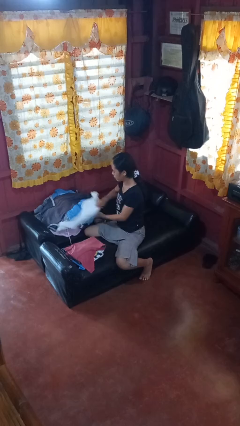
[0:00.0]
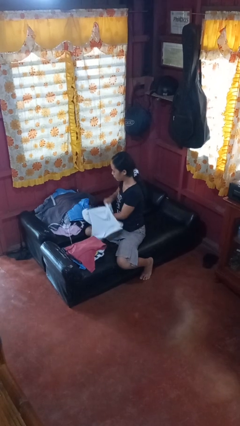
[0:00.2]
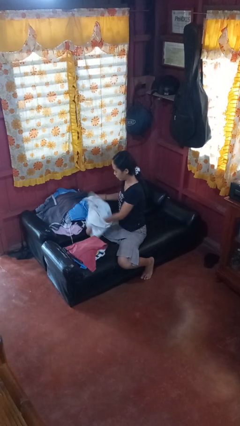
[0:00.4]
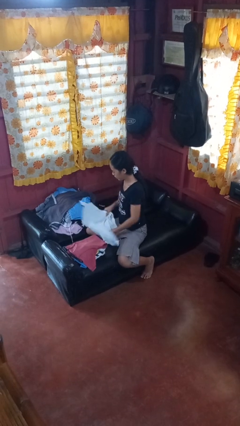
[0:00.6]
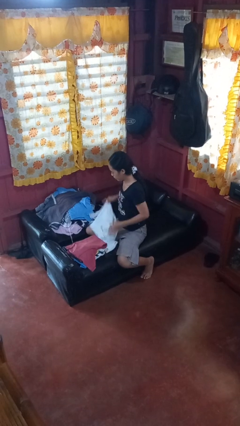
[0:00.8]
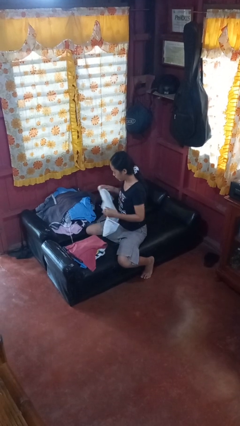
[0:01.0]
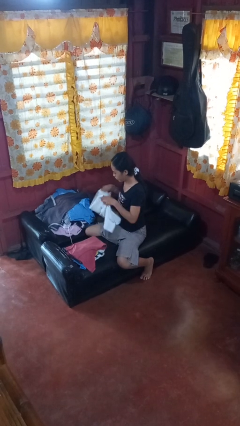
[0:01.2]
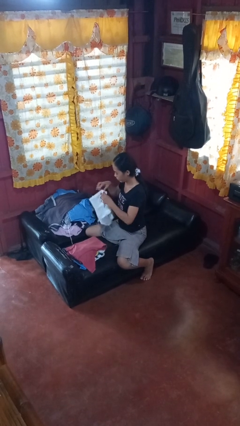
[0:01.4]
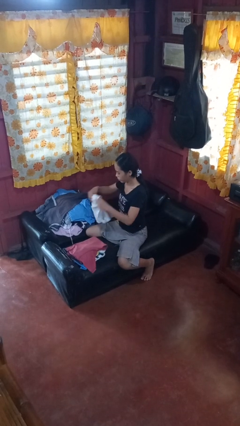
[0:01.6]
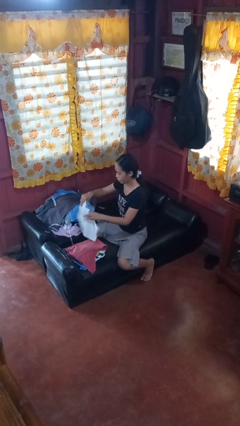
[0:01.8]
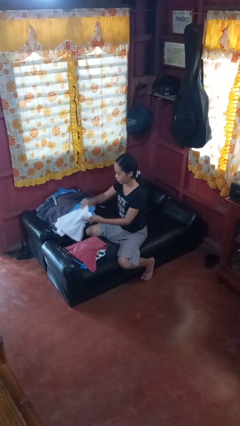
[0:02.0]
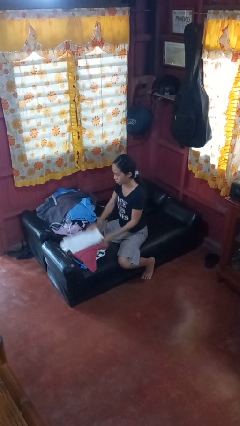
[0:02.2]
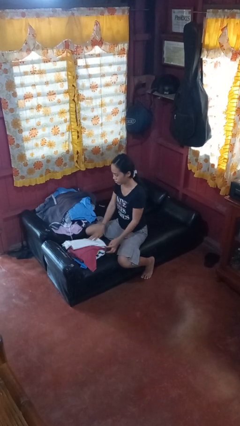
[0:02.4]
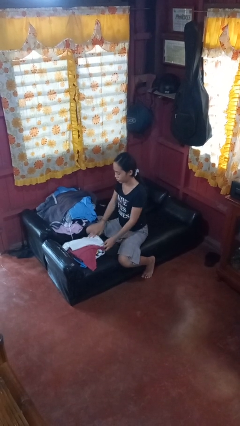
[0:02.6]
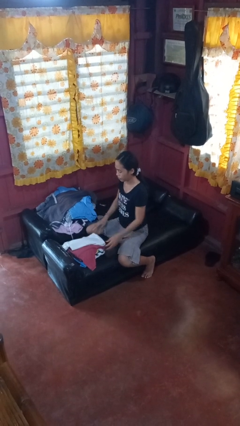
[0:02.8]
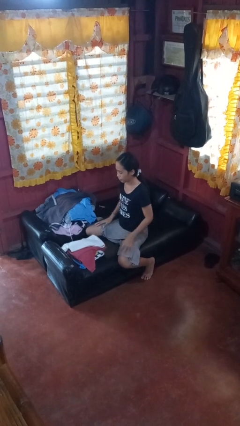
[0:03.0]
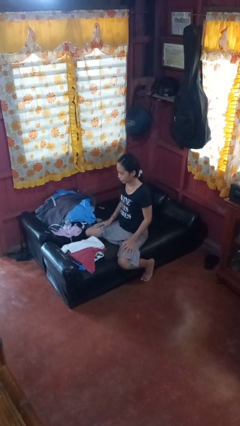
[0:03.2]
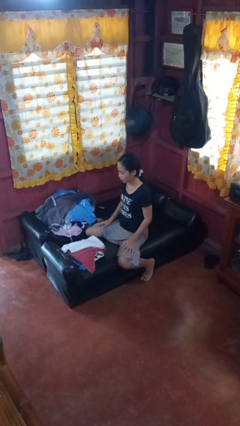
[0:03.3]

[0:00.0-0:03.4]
person folds shirt

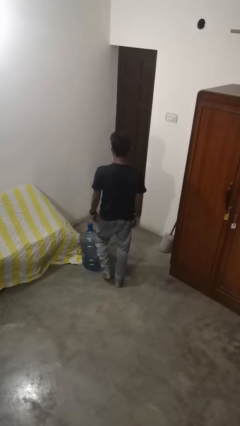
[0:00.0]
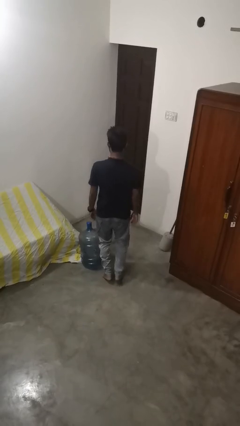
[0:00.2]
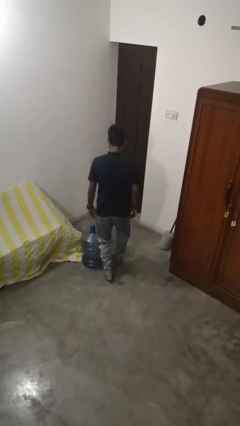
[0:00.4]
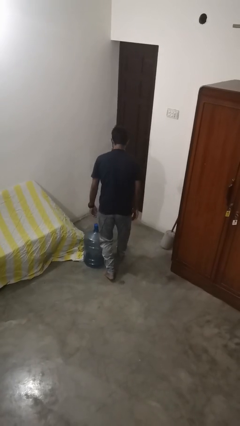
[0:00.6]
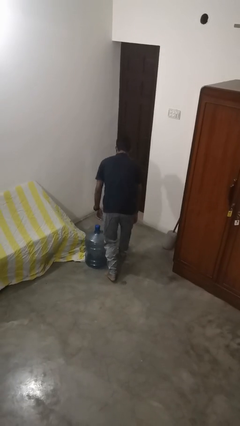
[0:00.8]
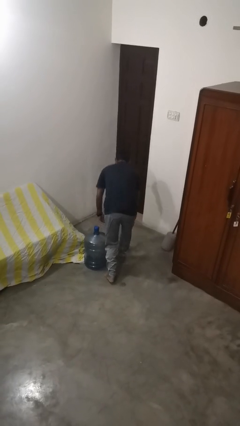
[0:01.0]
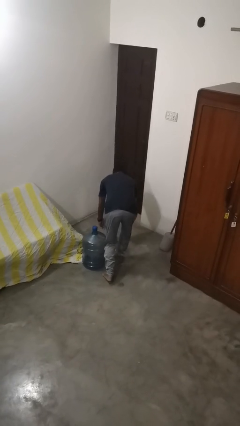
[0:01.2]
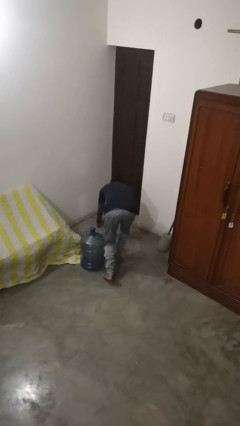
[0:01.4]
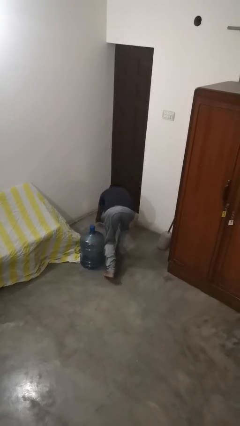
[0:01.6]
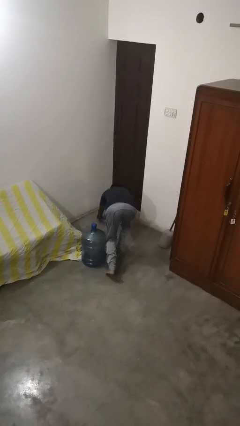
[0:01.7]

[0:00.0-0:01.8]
person trips on object on floor

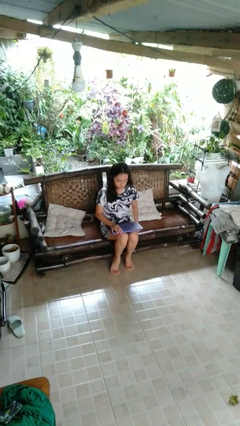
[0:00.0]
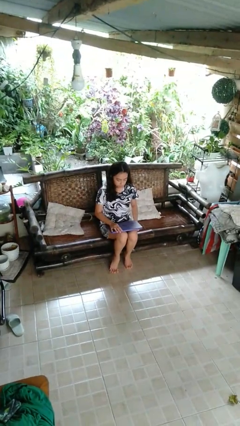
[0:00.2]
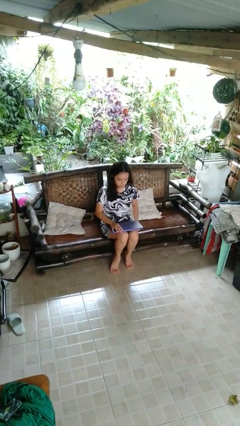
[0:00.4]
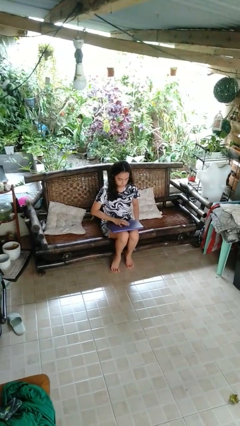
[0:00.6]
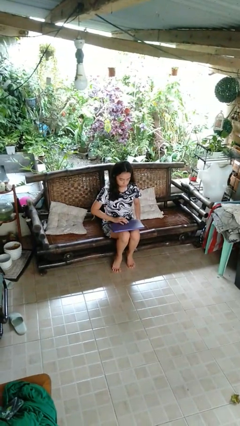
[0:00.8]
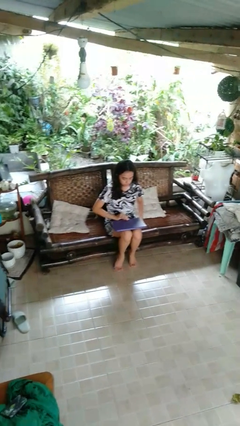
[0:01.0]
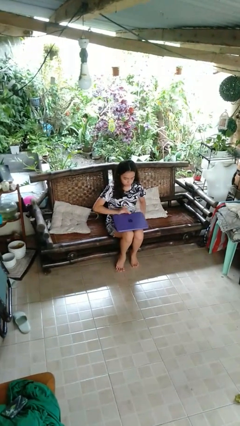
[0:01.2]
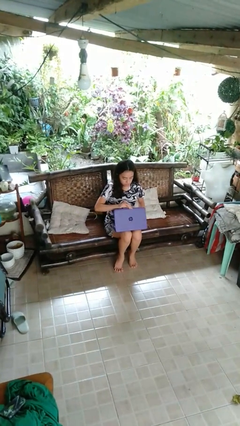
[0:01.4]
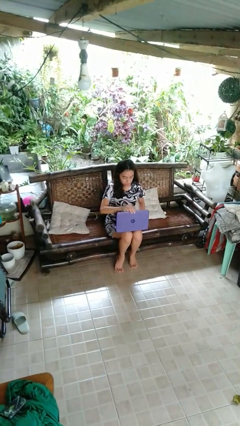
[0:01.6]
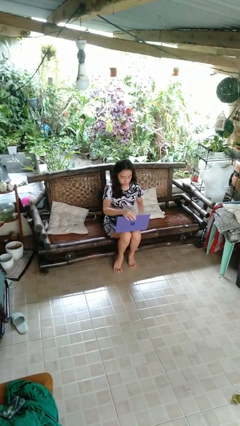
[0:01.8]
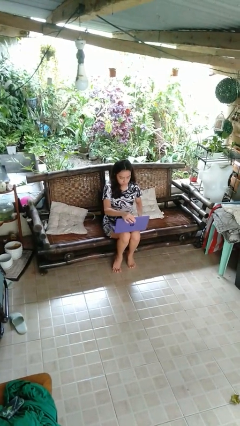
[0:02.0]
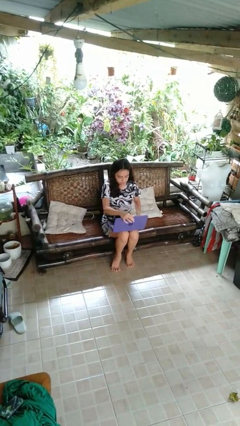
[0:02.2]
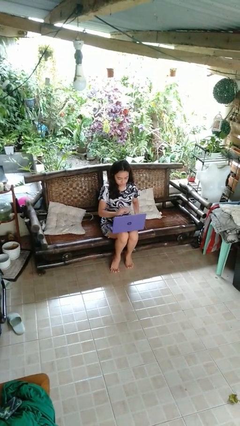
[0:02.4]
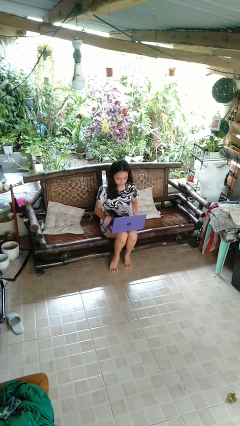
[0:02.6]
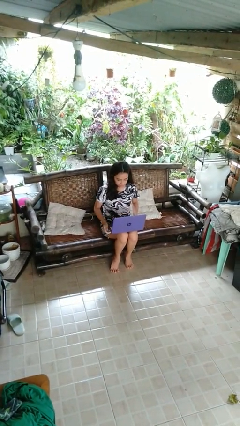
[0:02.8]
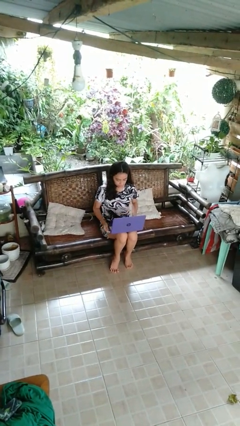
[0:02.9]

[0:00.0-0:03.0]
person opens laptop

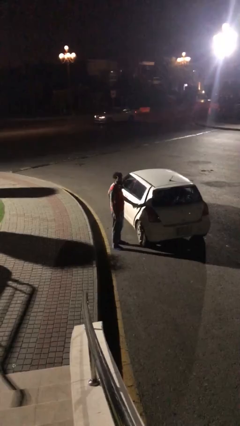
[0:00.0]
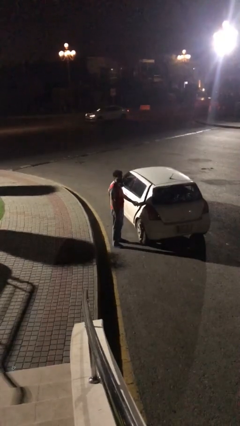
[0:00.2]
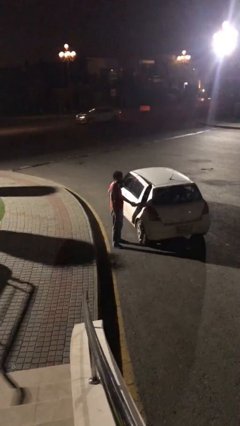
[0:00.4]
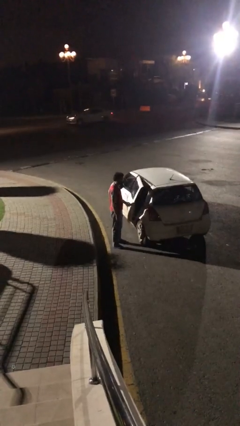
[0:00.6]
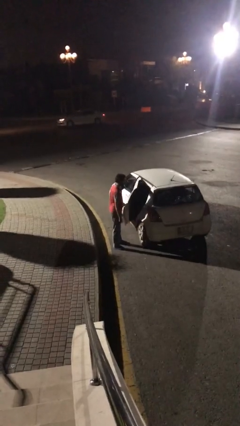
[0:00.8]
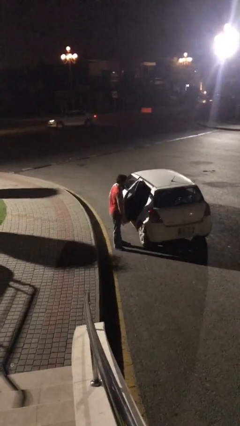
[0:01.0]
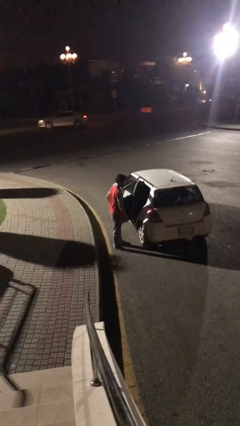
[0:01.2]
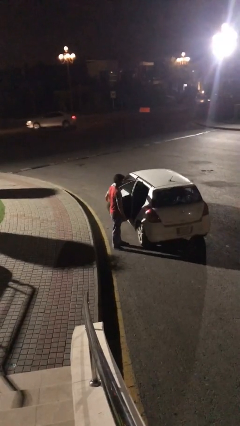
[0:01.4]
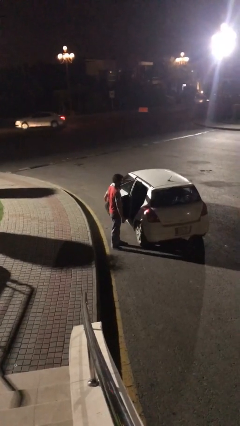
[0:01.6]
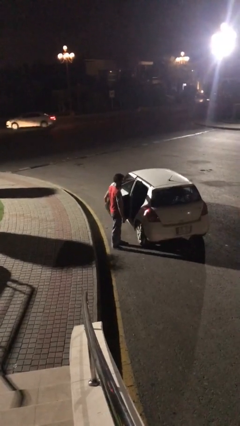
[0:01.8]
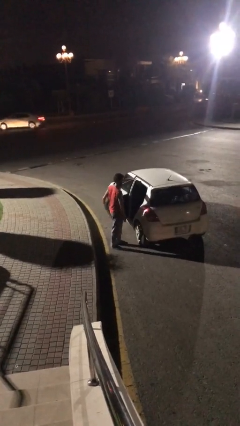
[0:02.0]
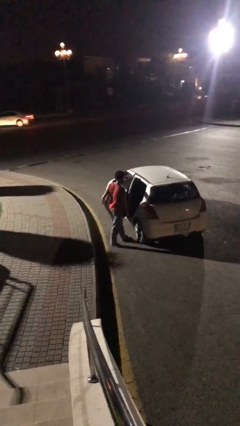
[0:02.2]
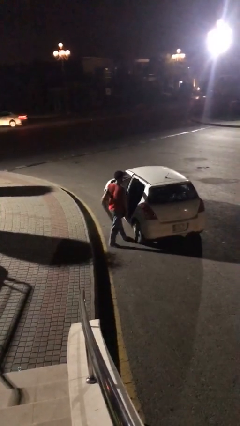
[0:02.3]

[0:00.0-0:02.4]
person opens car door

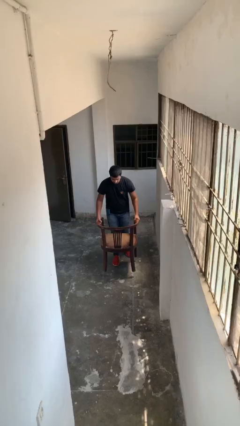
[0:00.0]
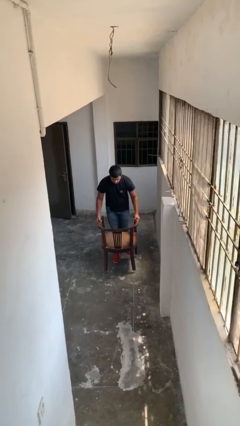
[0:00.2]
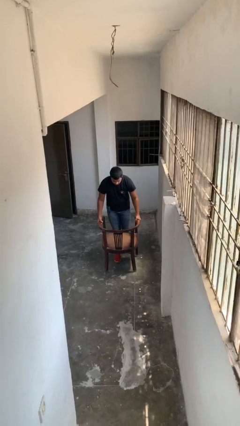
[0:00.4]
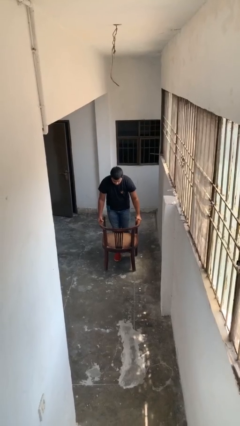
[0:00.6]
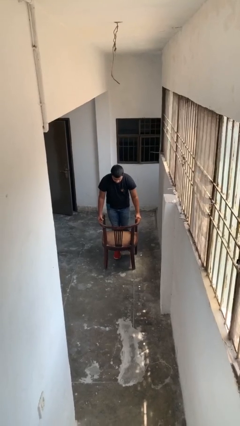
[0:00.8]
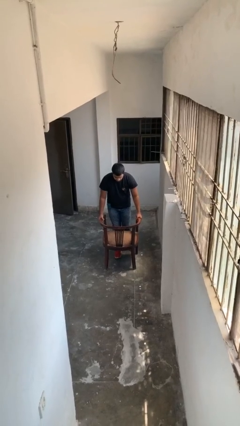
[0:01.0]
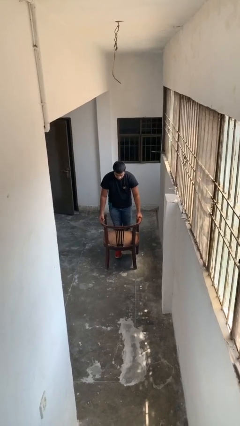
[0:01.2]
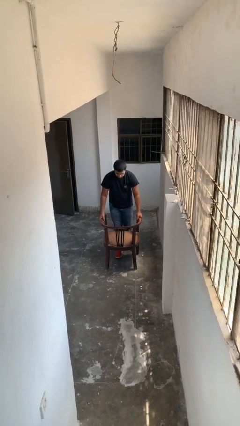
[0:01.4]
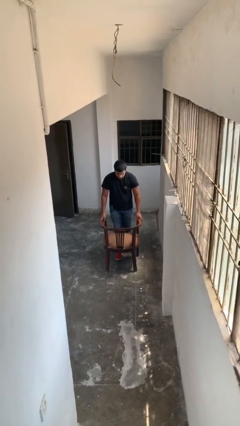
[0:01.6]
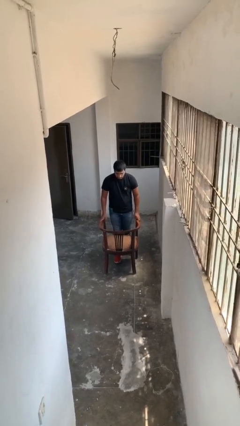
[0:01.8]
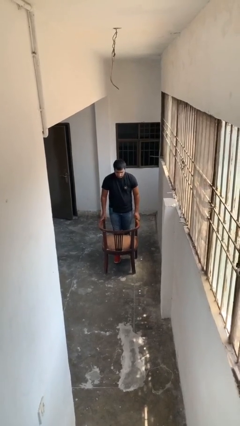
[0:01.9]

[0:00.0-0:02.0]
person puts down object on floor

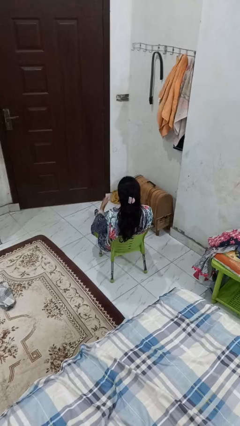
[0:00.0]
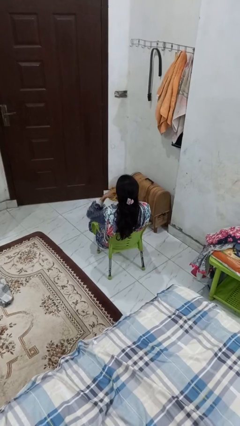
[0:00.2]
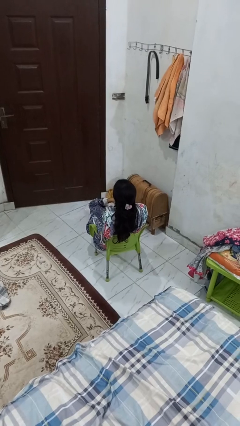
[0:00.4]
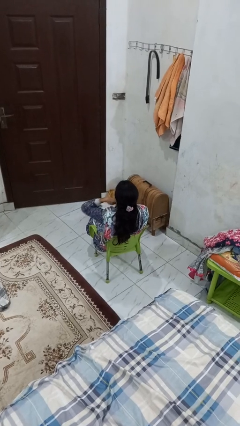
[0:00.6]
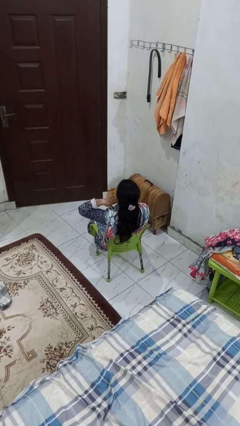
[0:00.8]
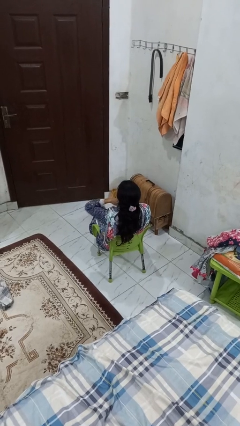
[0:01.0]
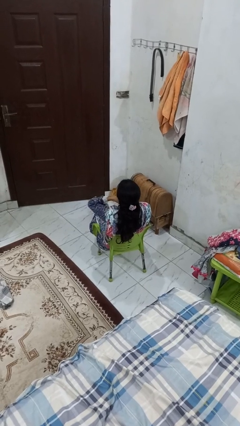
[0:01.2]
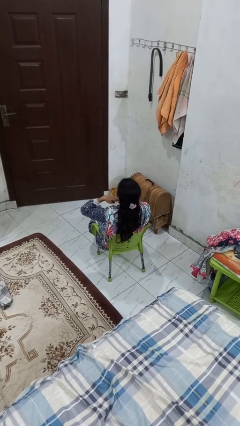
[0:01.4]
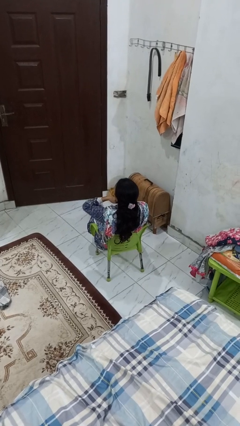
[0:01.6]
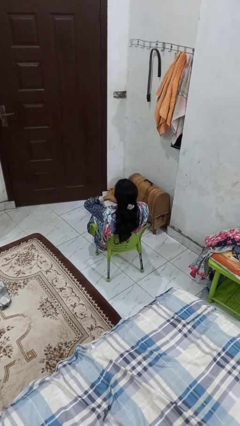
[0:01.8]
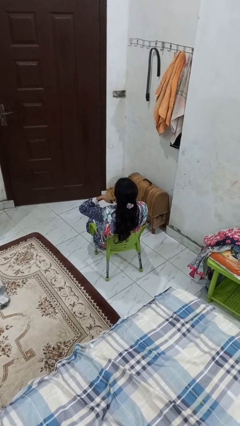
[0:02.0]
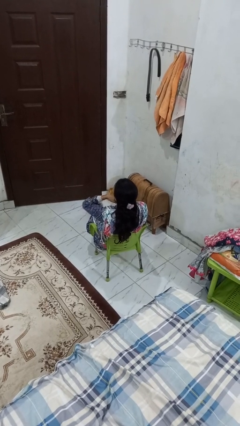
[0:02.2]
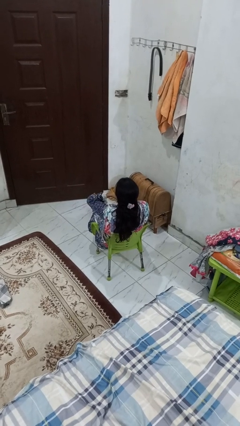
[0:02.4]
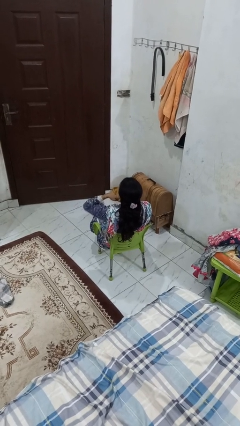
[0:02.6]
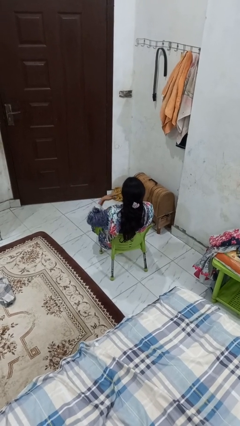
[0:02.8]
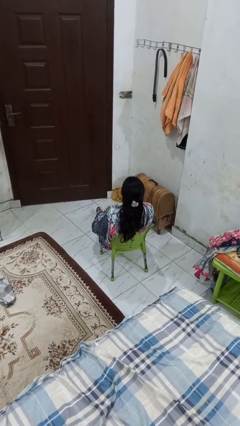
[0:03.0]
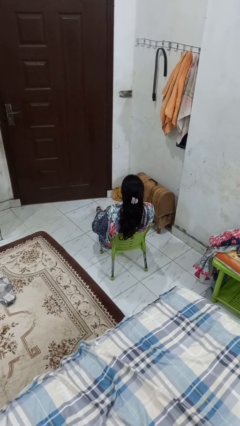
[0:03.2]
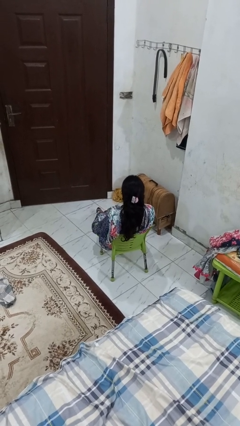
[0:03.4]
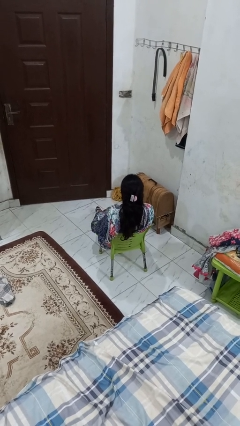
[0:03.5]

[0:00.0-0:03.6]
person gestures cut

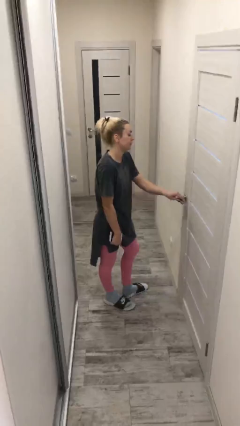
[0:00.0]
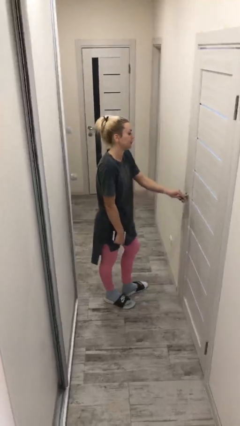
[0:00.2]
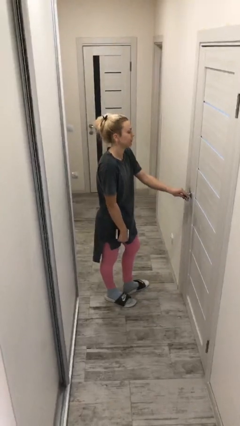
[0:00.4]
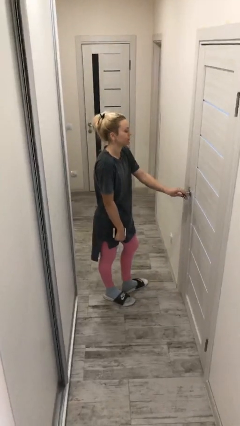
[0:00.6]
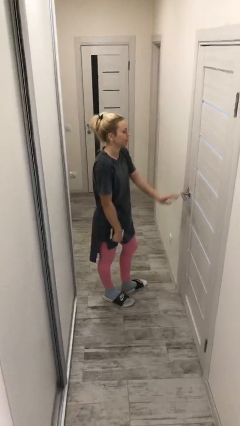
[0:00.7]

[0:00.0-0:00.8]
person closes facility door
